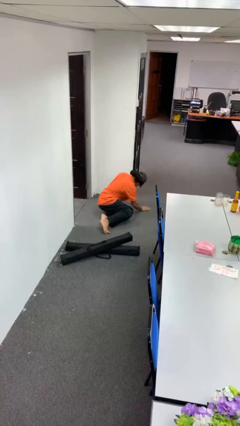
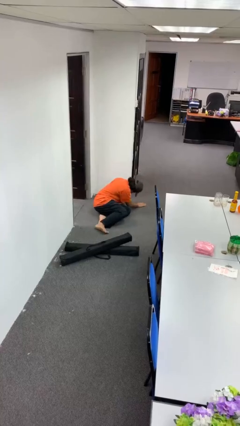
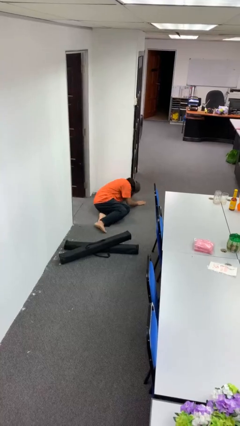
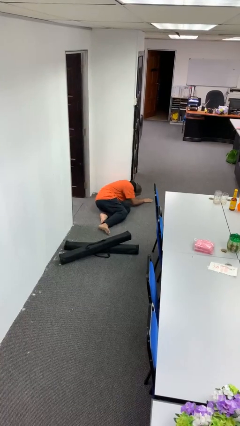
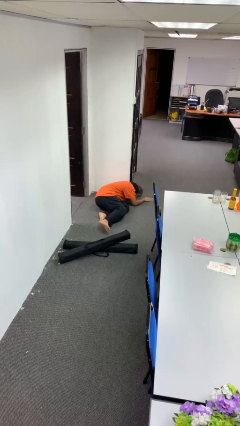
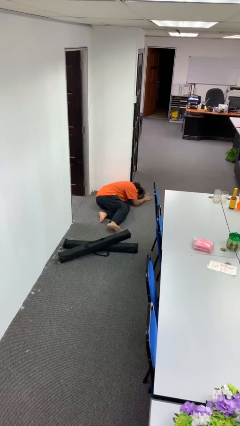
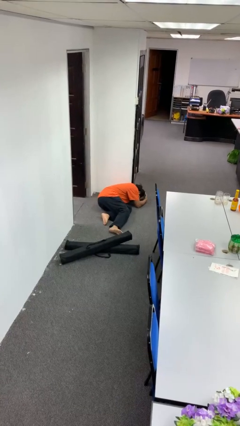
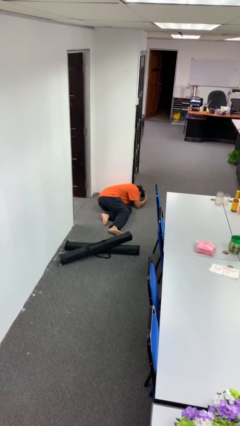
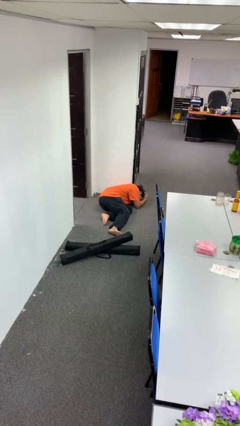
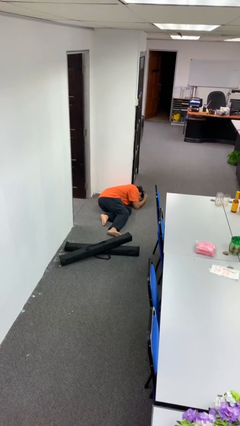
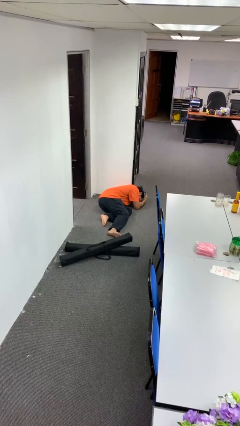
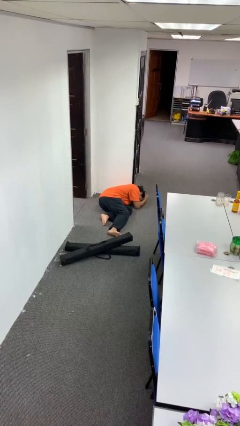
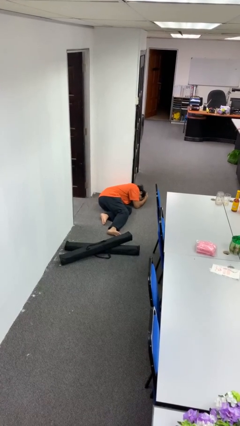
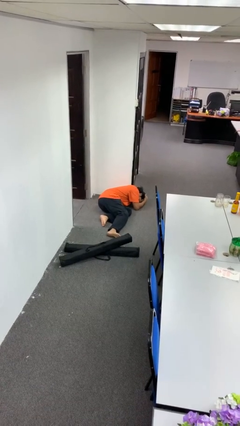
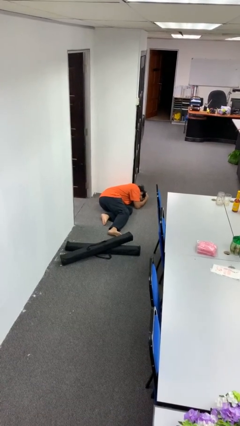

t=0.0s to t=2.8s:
person lies down on floor

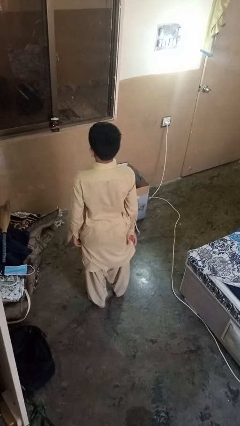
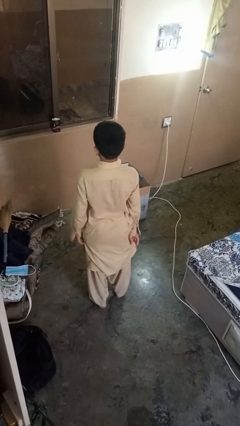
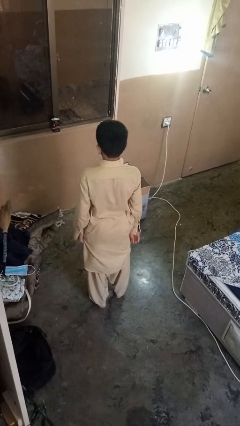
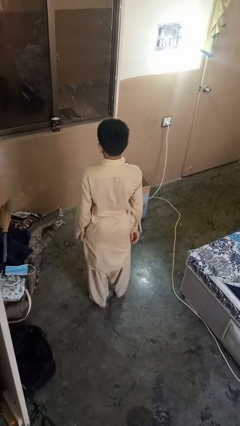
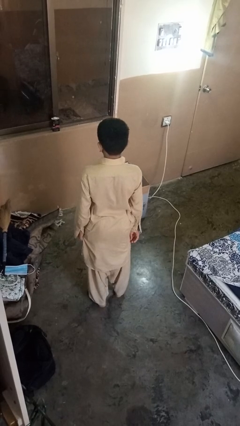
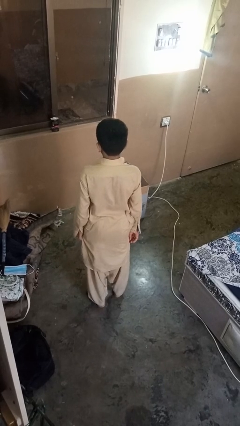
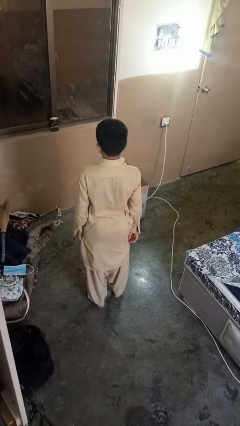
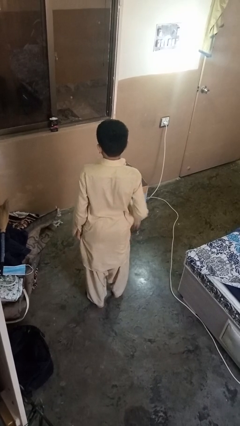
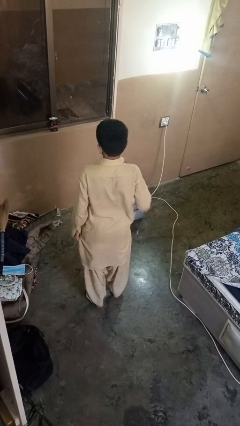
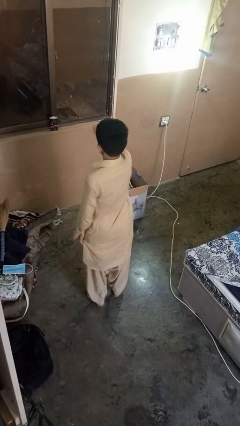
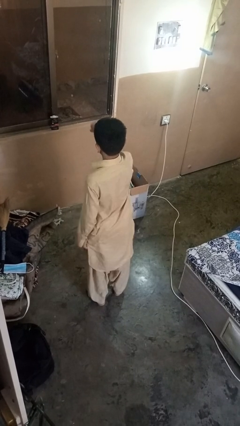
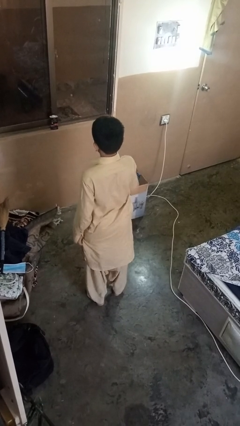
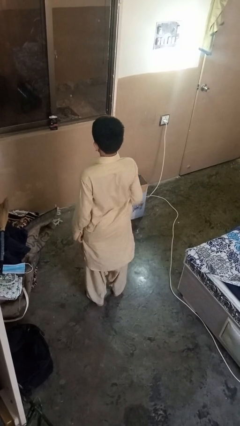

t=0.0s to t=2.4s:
person karate chop

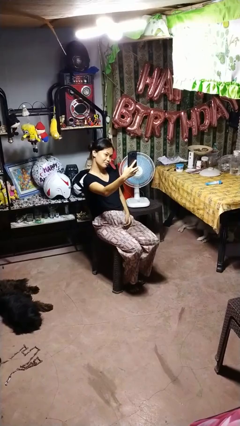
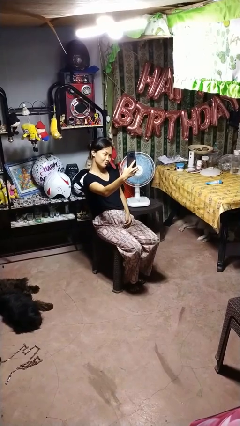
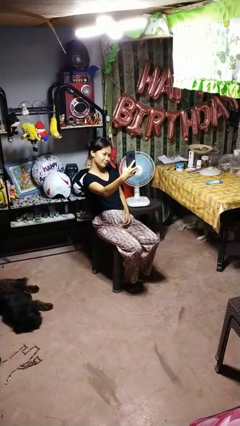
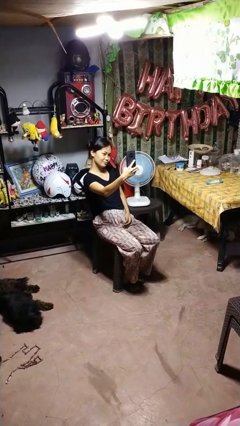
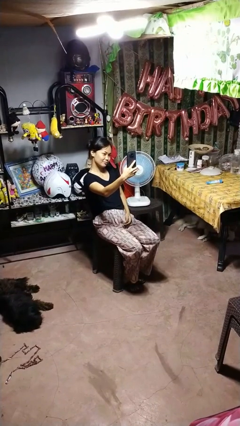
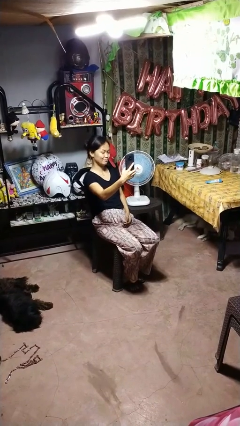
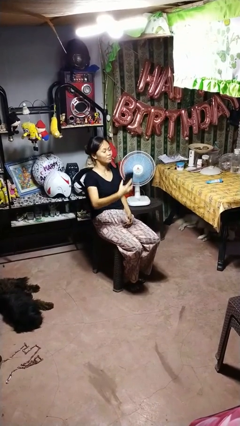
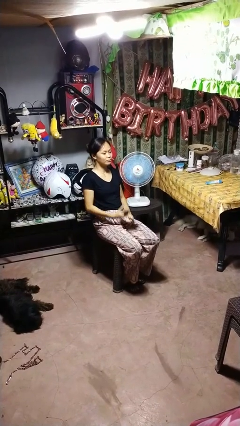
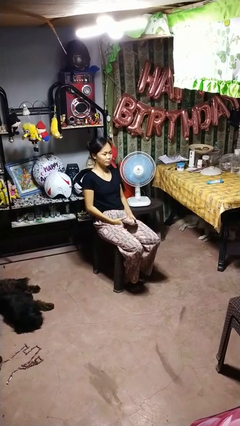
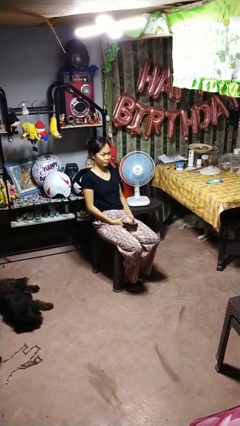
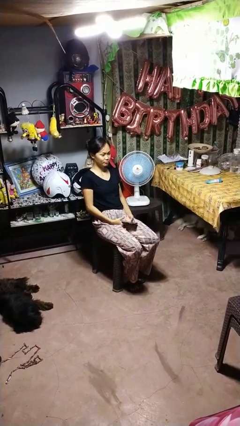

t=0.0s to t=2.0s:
person takes selfie

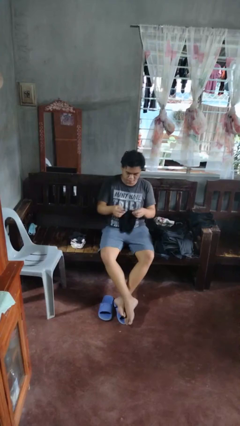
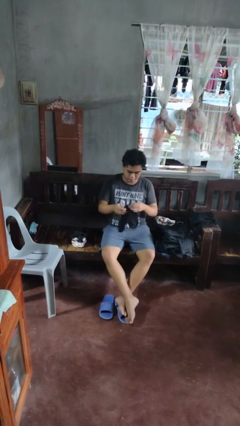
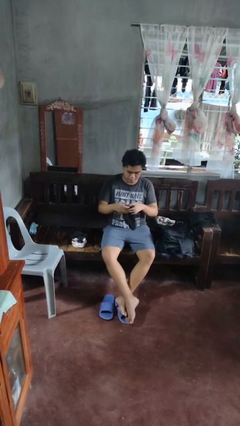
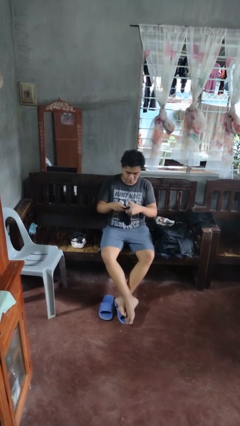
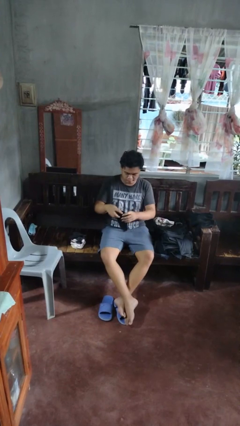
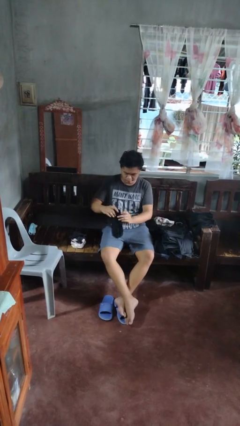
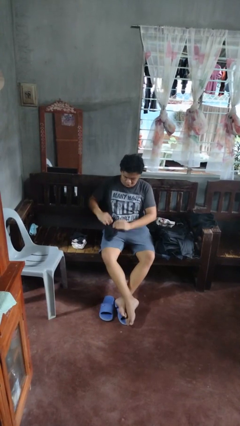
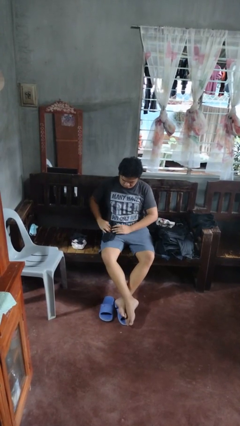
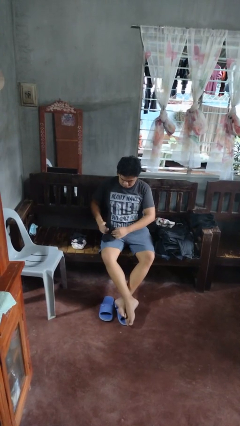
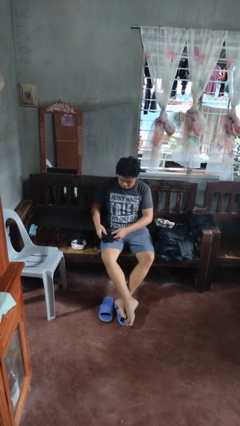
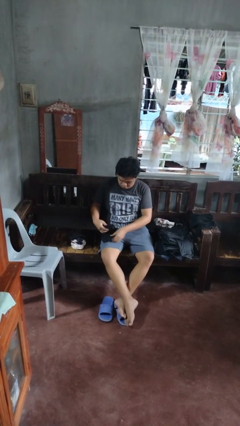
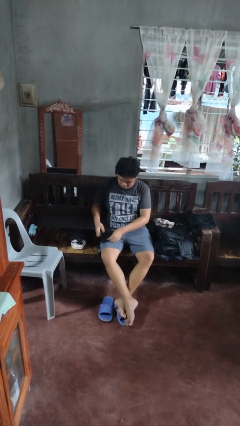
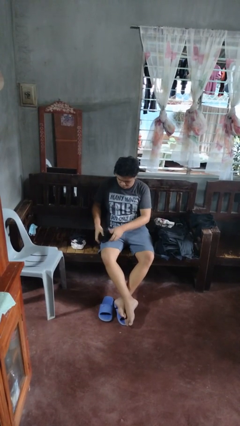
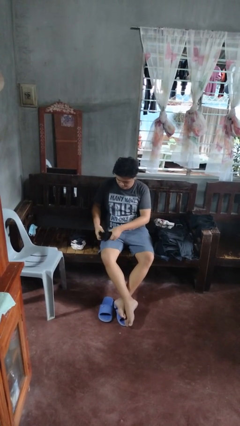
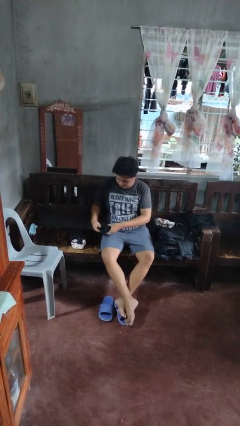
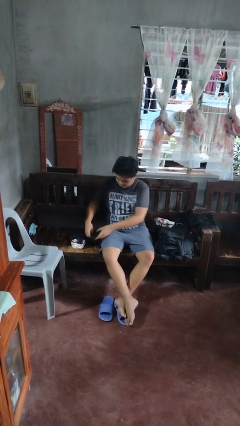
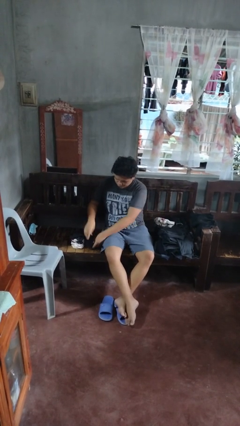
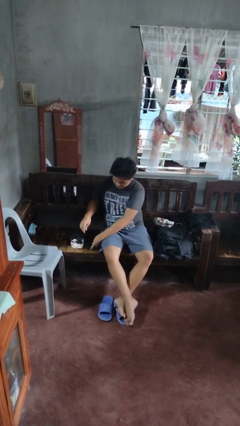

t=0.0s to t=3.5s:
person folds socks

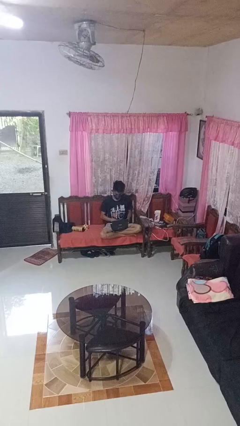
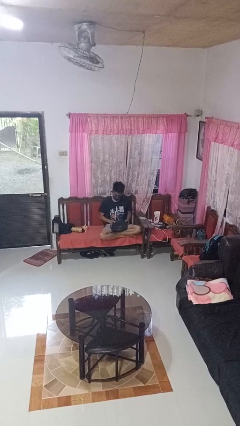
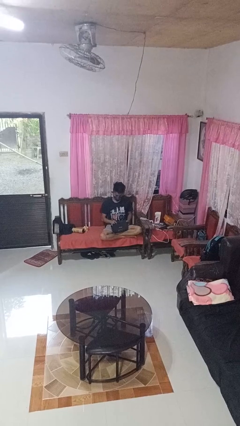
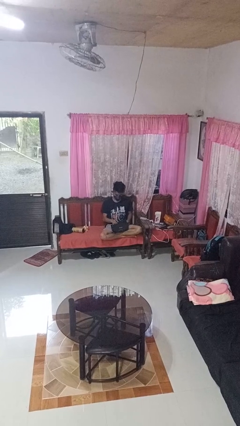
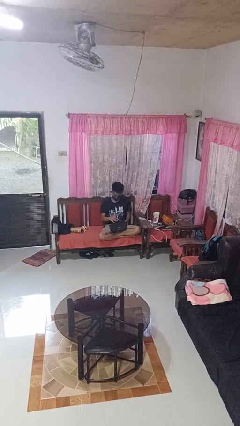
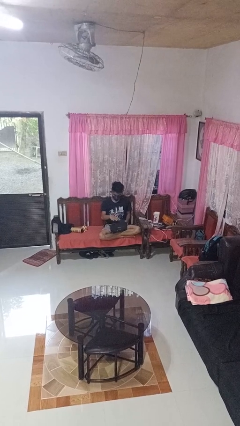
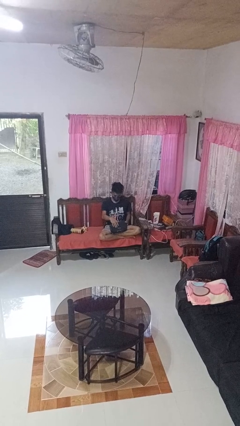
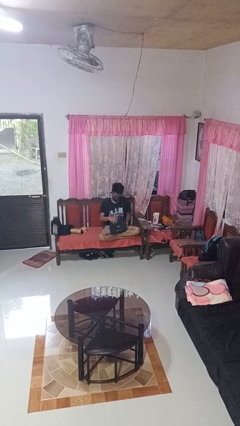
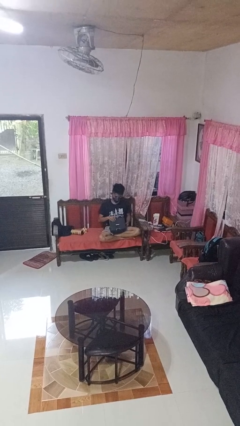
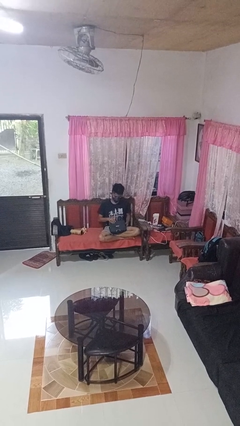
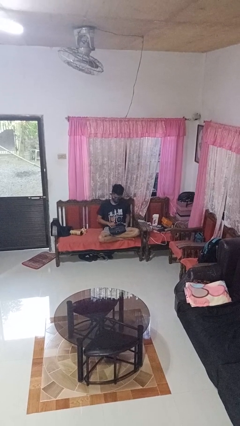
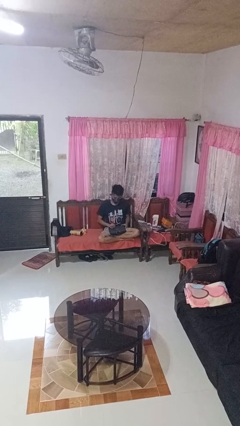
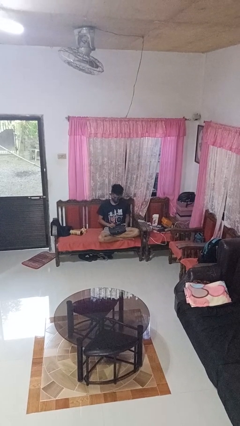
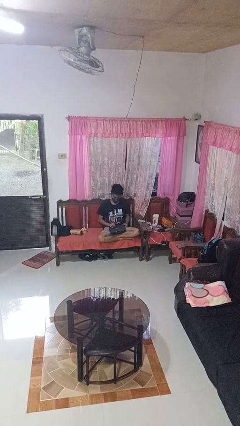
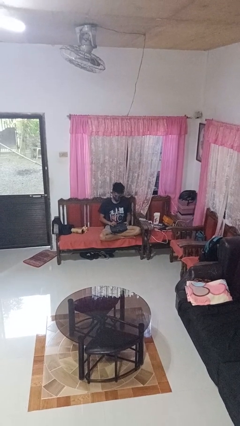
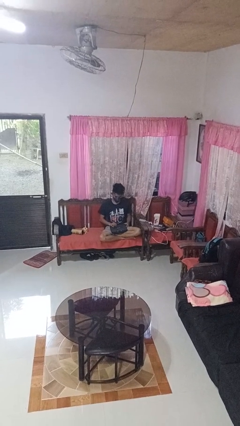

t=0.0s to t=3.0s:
person closes laptop

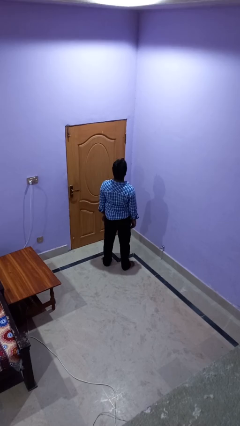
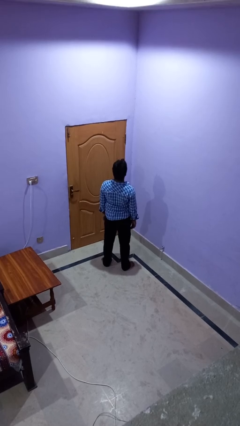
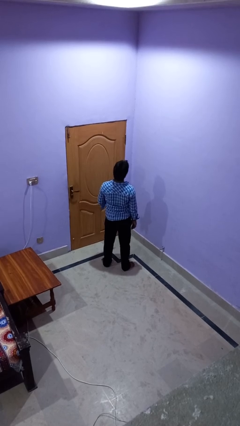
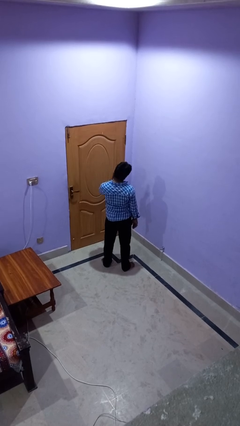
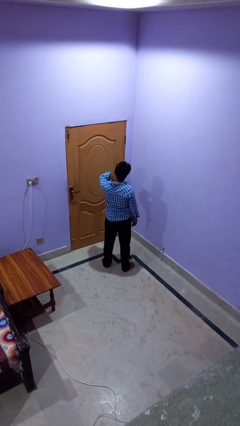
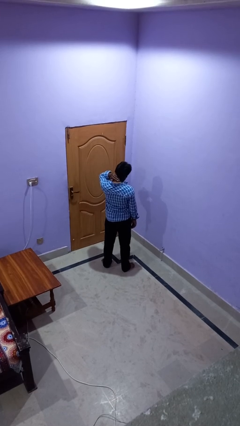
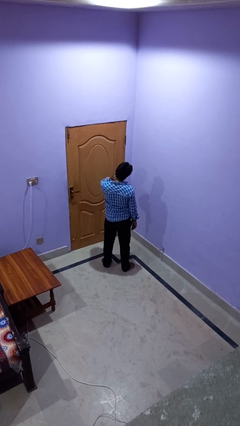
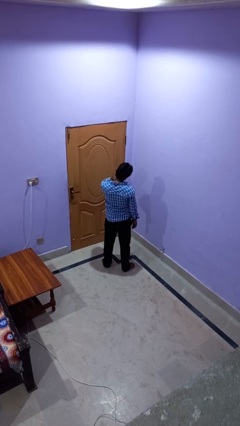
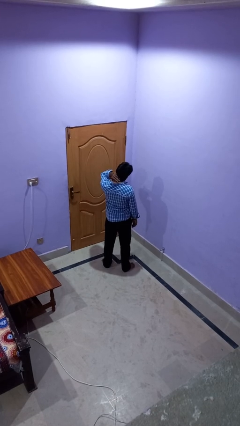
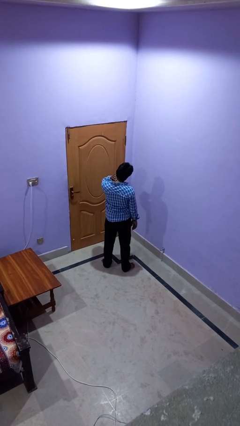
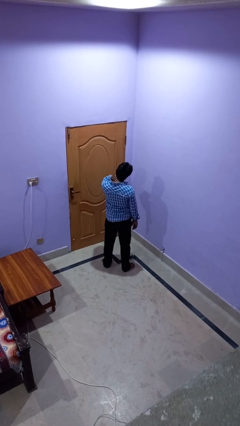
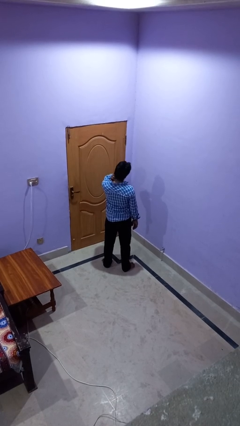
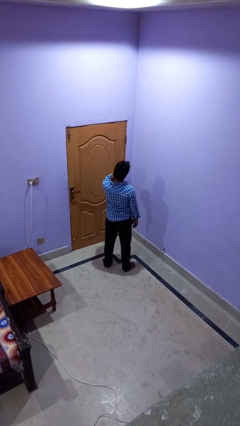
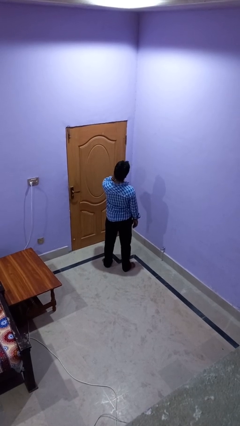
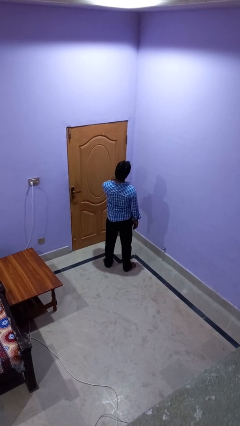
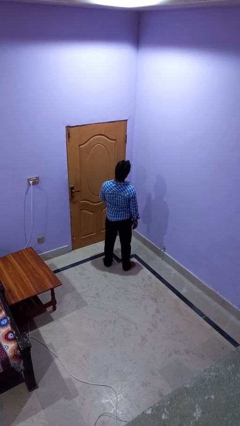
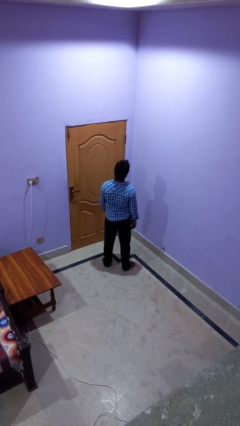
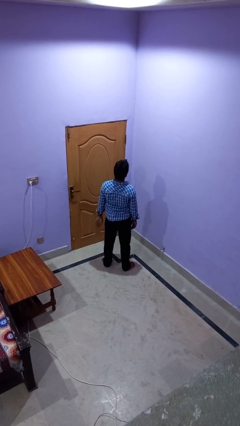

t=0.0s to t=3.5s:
person rubs neck

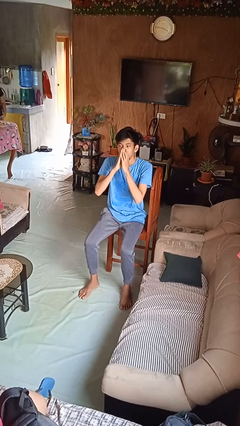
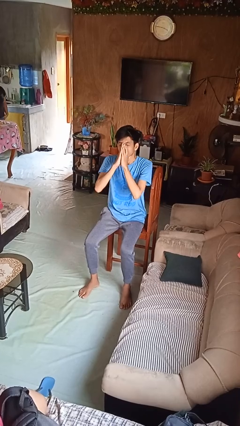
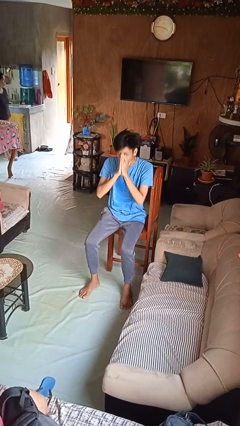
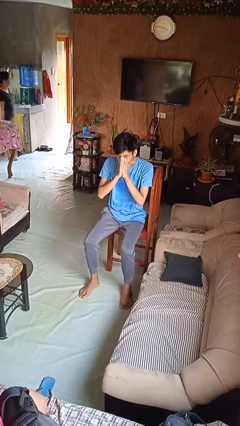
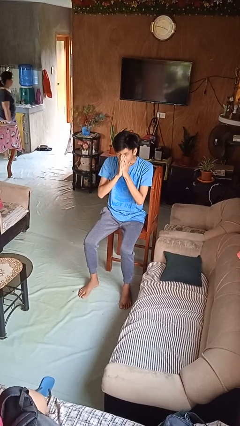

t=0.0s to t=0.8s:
person sneezes into hand
